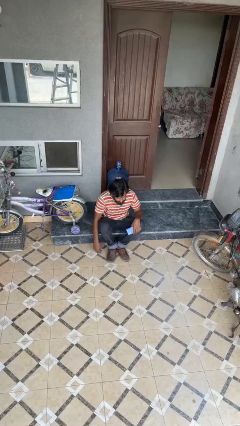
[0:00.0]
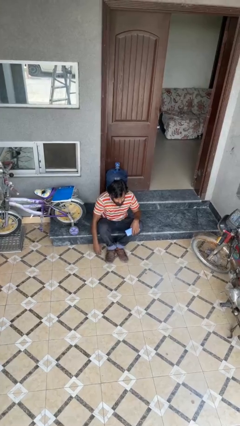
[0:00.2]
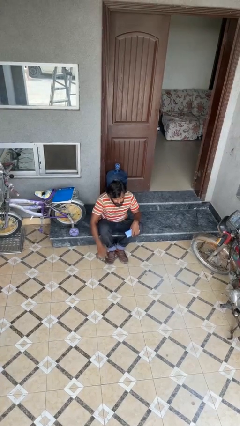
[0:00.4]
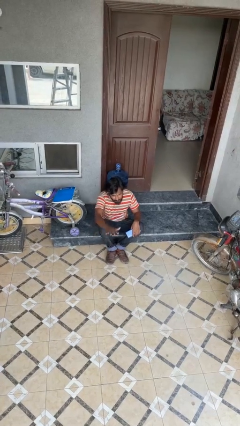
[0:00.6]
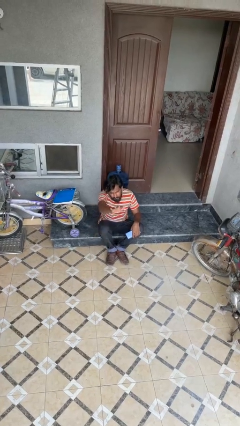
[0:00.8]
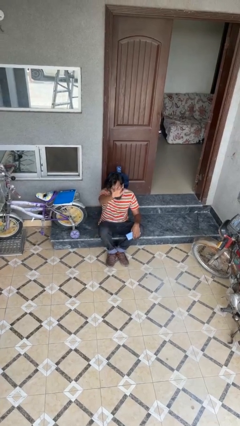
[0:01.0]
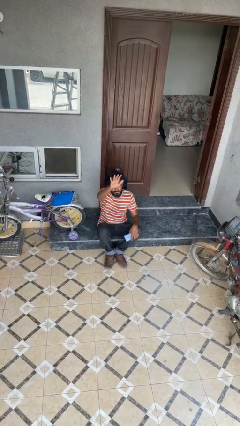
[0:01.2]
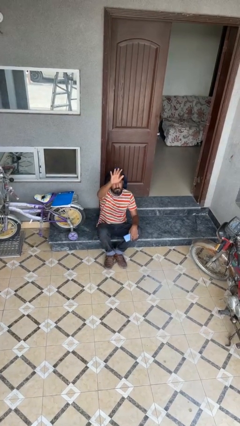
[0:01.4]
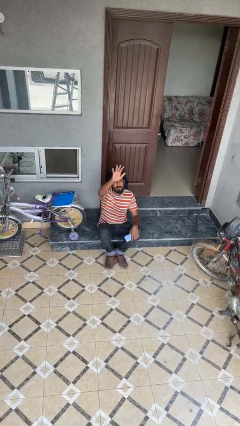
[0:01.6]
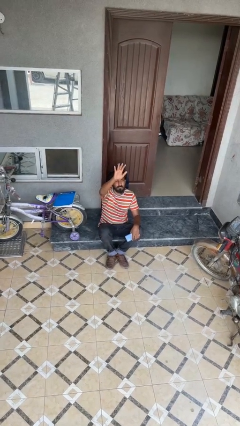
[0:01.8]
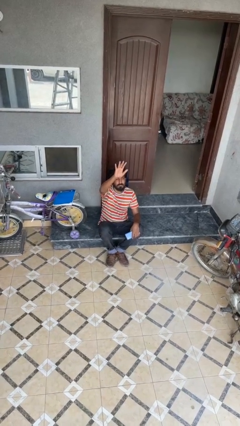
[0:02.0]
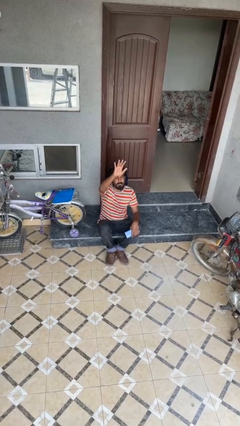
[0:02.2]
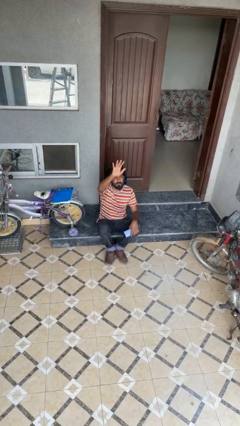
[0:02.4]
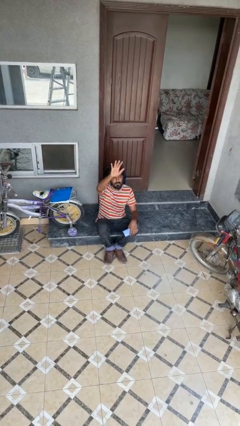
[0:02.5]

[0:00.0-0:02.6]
person gestures raise hand

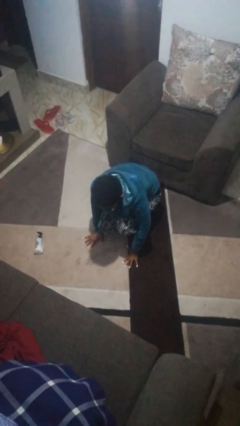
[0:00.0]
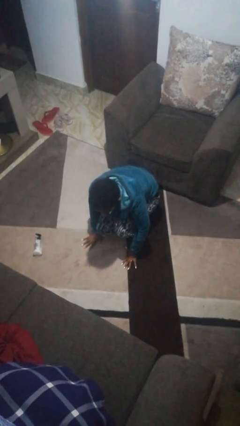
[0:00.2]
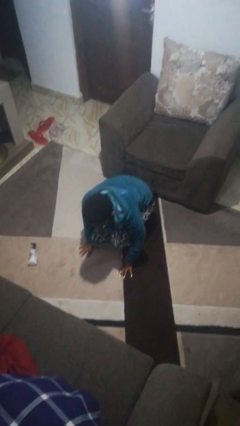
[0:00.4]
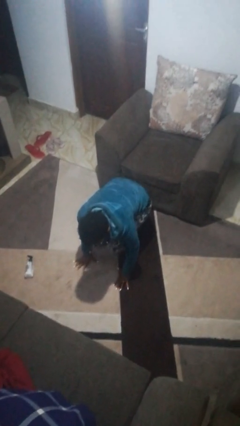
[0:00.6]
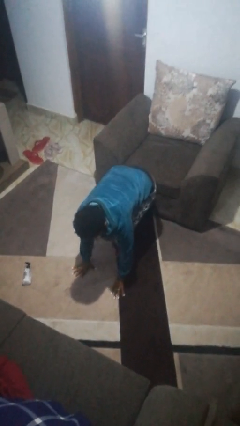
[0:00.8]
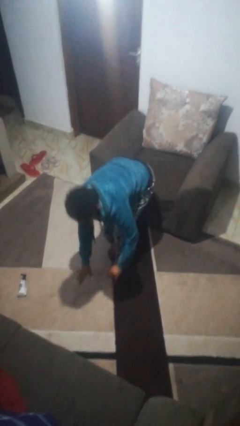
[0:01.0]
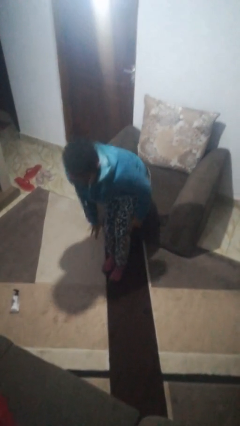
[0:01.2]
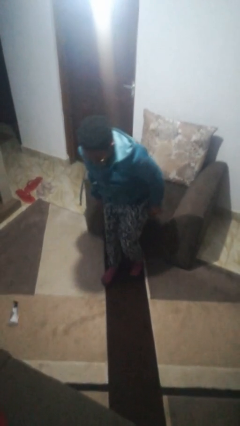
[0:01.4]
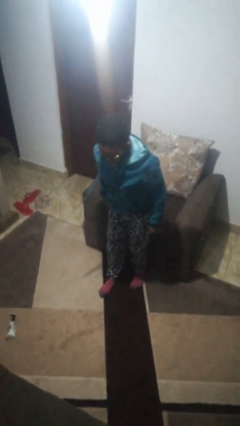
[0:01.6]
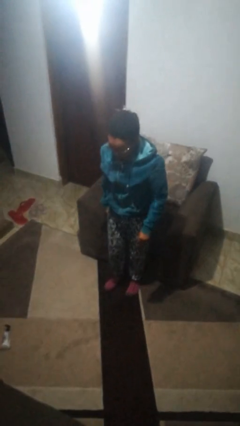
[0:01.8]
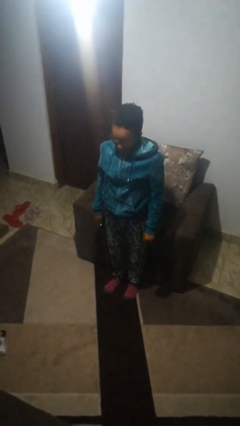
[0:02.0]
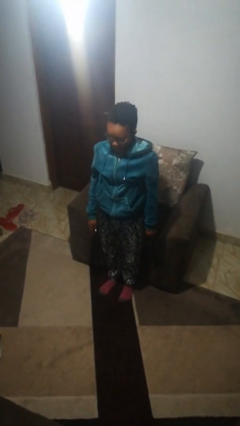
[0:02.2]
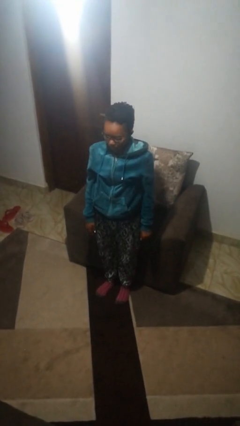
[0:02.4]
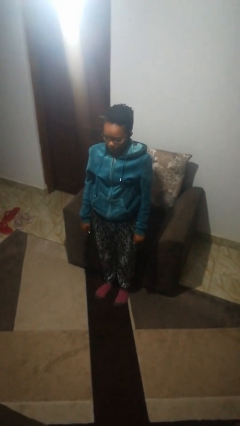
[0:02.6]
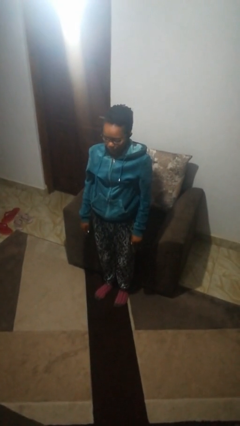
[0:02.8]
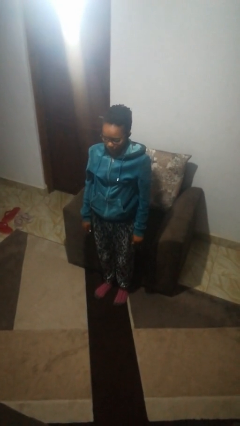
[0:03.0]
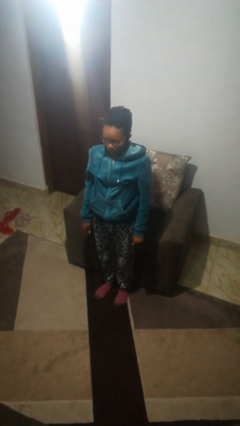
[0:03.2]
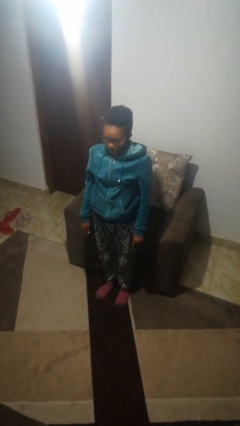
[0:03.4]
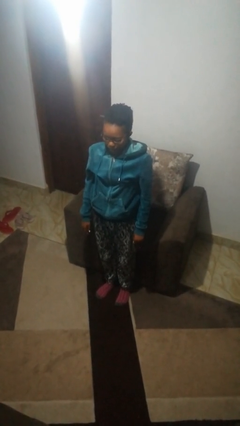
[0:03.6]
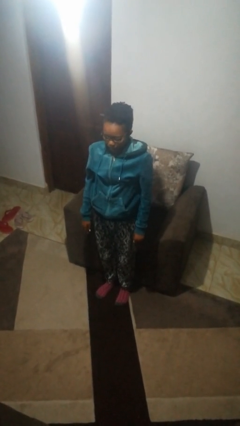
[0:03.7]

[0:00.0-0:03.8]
person stands up from floor

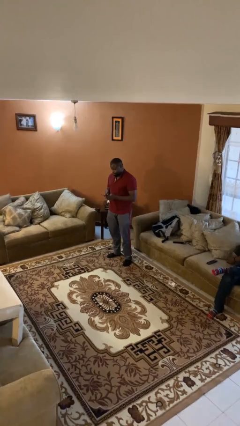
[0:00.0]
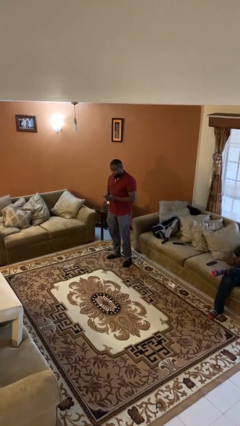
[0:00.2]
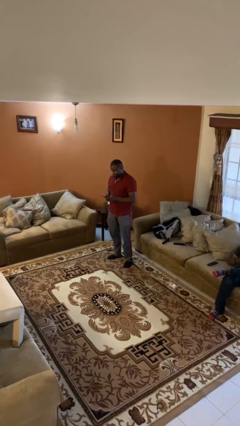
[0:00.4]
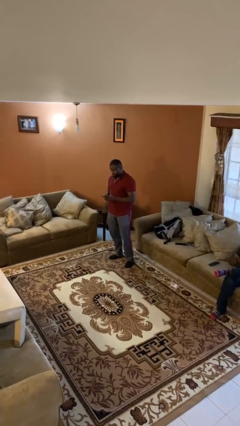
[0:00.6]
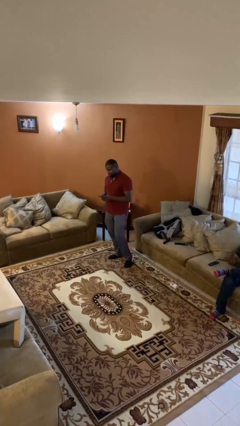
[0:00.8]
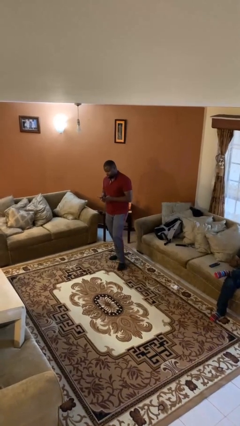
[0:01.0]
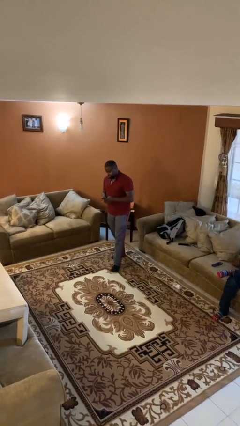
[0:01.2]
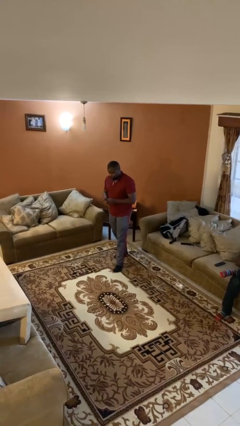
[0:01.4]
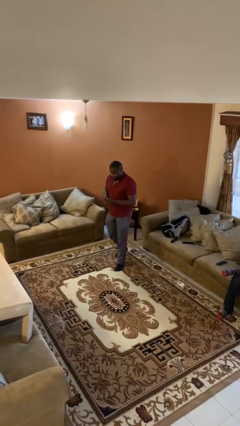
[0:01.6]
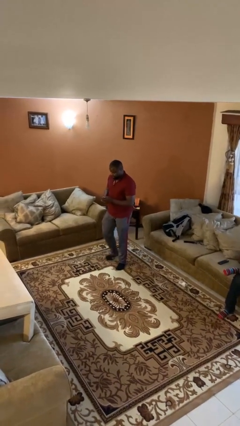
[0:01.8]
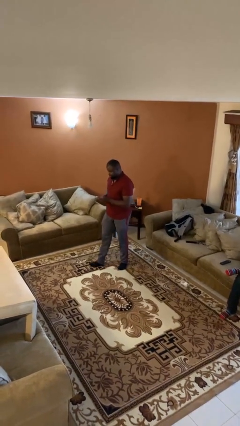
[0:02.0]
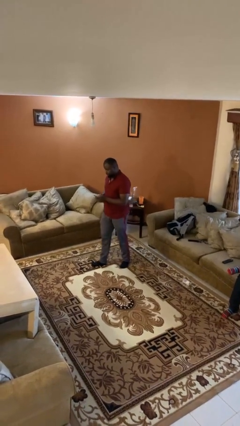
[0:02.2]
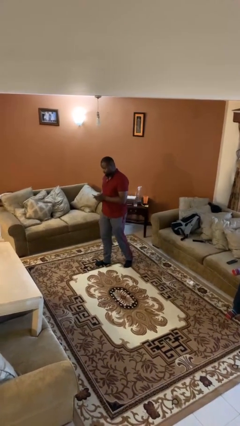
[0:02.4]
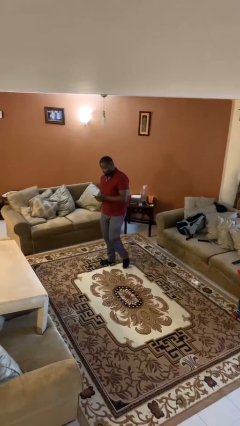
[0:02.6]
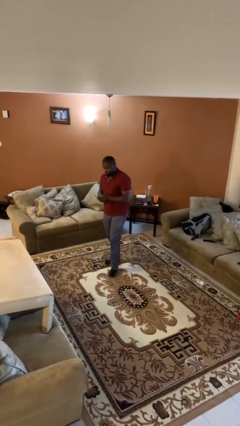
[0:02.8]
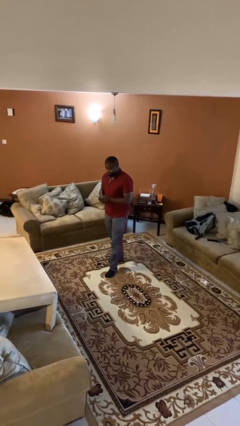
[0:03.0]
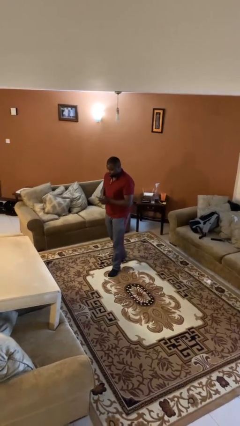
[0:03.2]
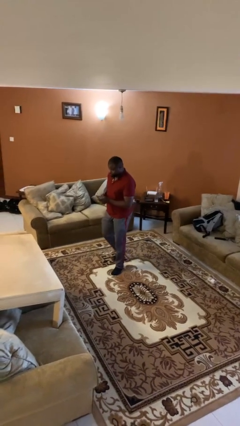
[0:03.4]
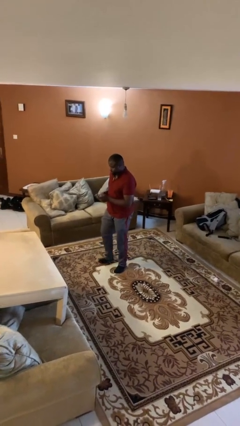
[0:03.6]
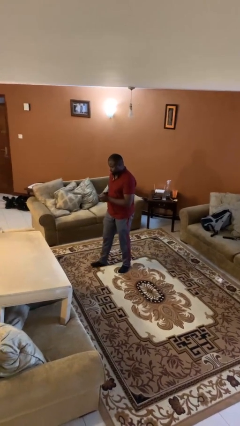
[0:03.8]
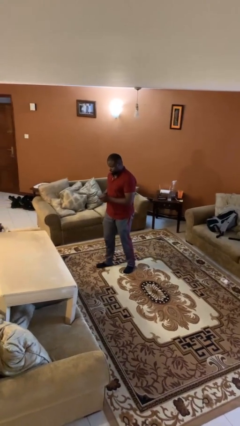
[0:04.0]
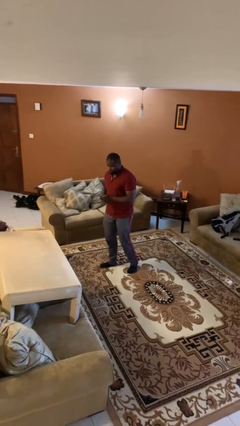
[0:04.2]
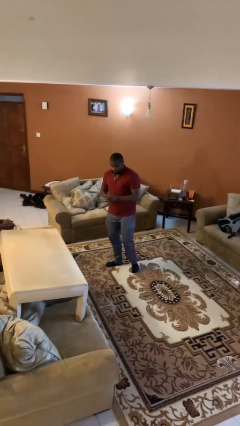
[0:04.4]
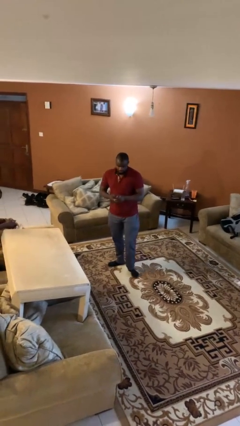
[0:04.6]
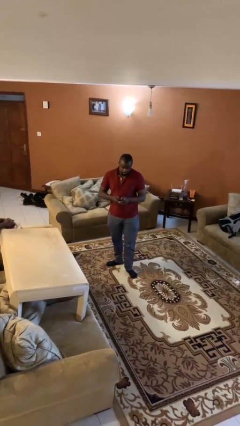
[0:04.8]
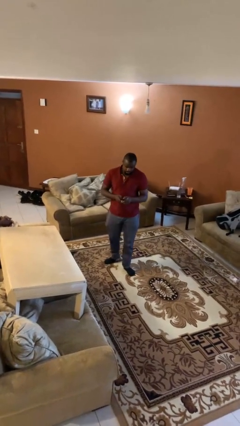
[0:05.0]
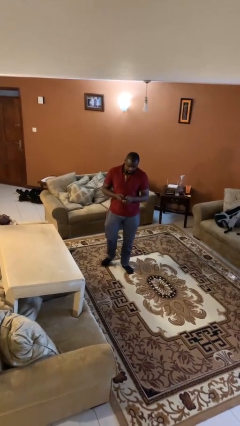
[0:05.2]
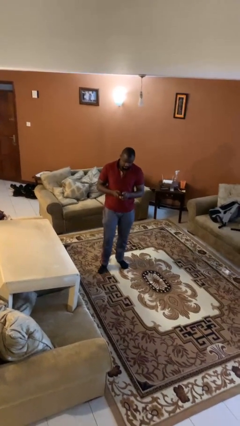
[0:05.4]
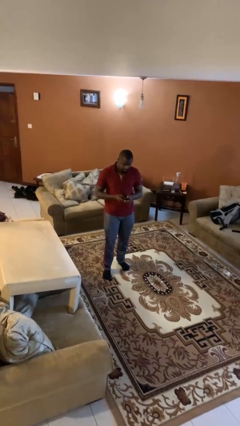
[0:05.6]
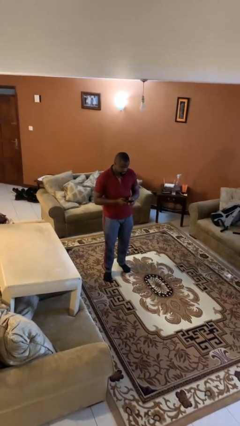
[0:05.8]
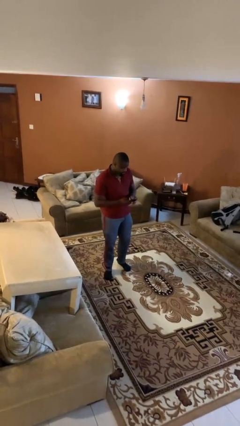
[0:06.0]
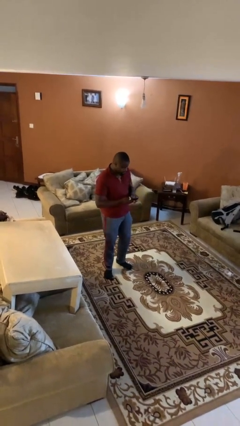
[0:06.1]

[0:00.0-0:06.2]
person texts on phone

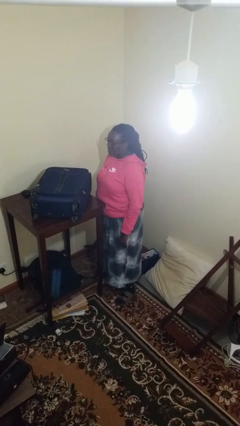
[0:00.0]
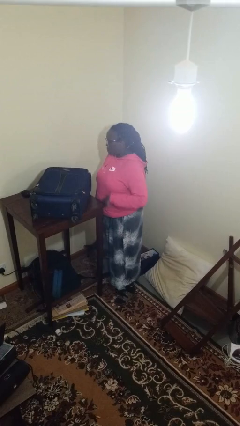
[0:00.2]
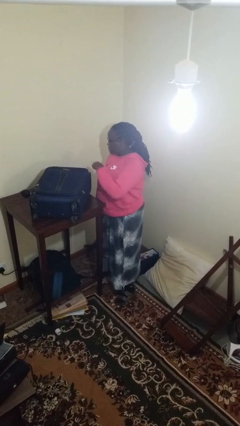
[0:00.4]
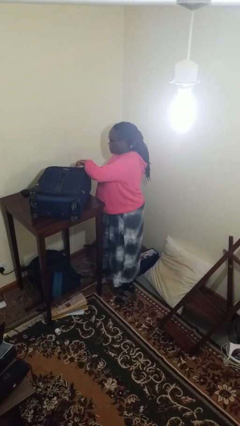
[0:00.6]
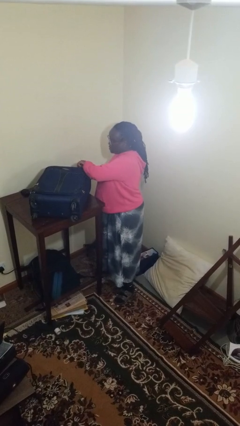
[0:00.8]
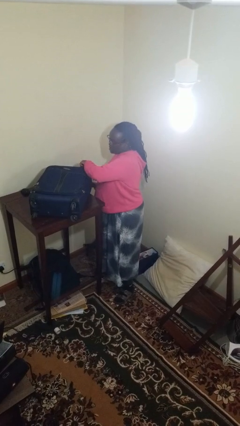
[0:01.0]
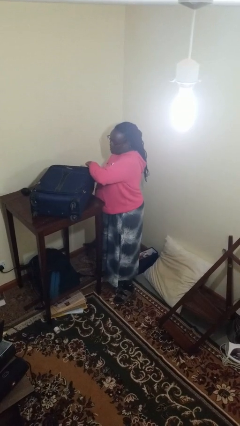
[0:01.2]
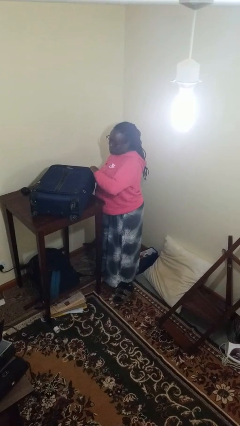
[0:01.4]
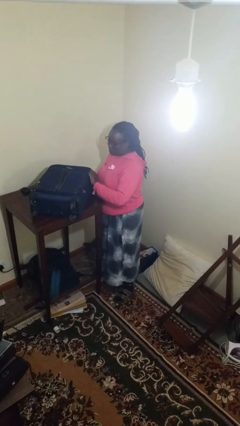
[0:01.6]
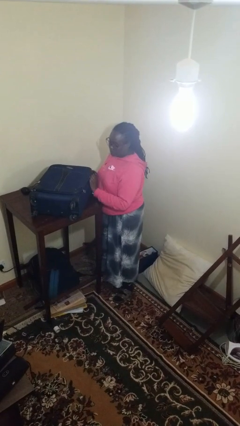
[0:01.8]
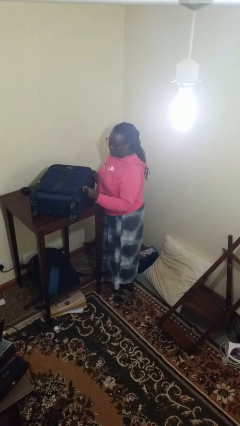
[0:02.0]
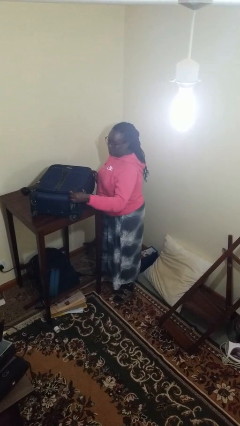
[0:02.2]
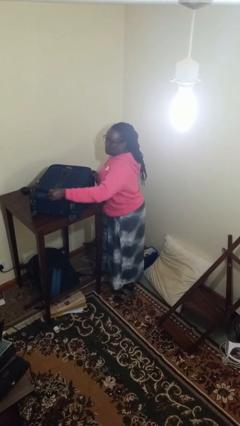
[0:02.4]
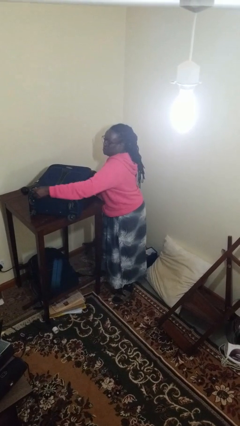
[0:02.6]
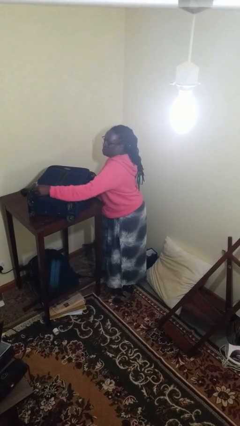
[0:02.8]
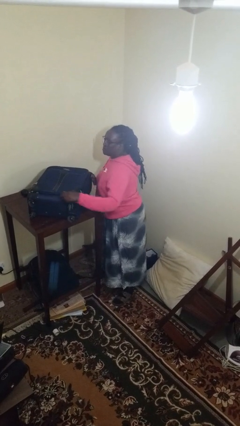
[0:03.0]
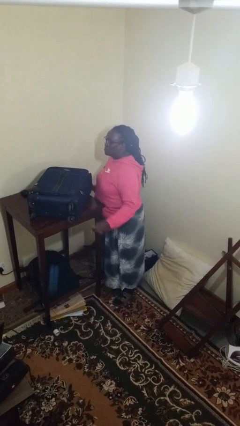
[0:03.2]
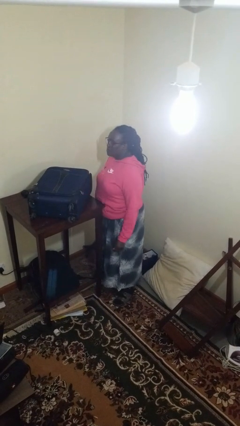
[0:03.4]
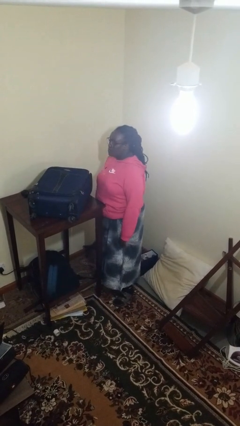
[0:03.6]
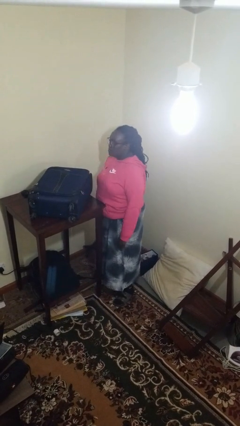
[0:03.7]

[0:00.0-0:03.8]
person closes suitcase

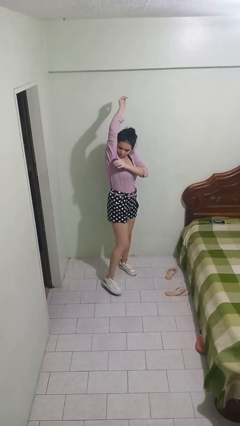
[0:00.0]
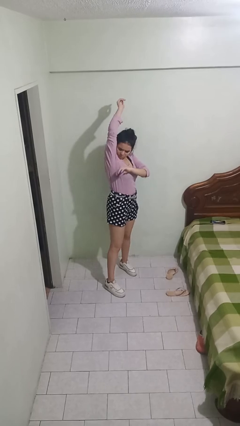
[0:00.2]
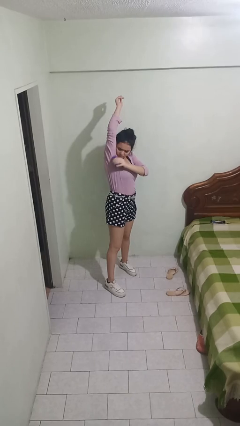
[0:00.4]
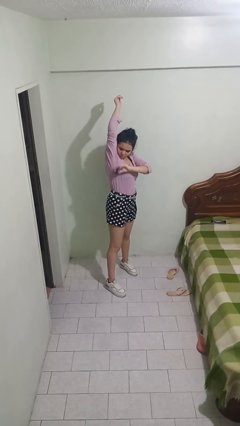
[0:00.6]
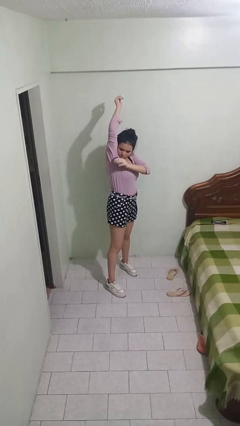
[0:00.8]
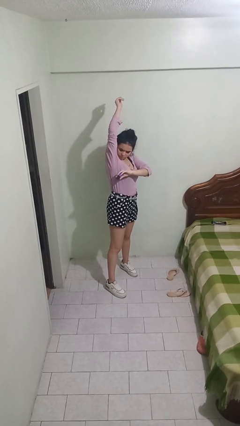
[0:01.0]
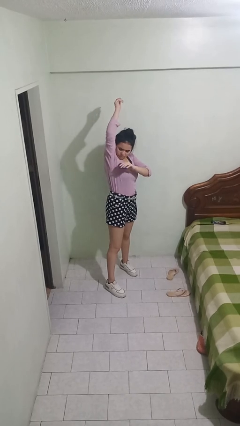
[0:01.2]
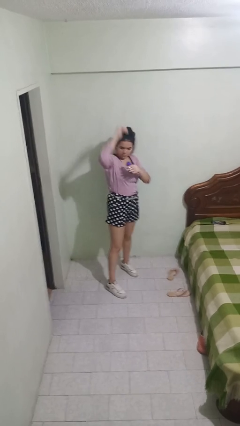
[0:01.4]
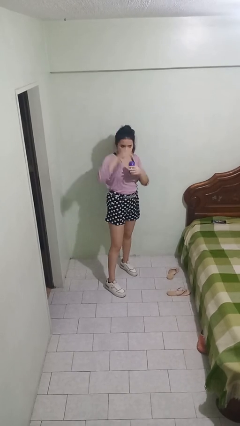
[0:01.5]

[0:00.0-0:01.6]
person applies deodorant
